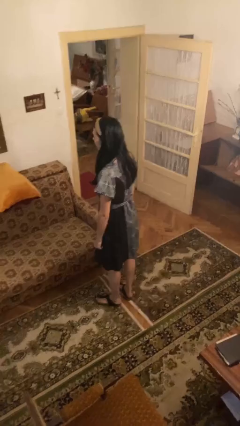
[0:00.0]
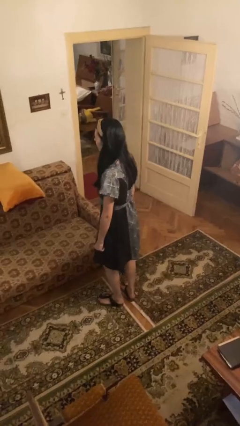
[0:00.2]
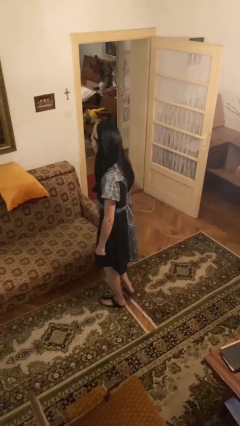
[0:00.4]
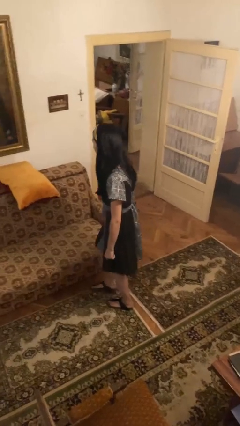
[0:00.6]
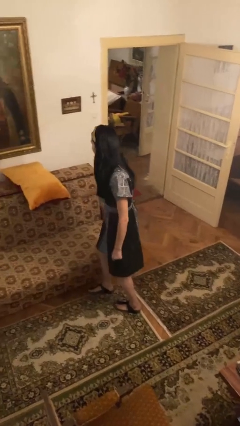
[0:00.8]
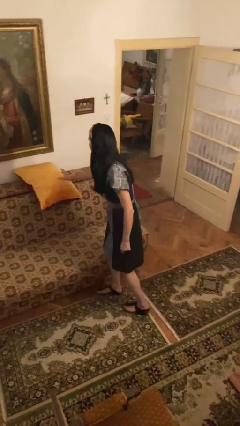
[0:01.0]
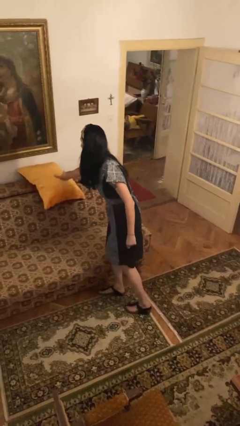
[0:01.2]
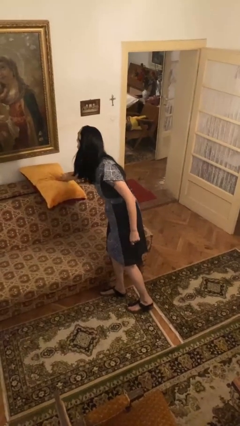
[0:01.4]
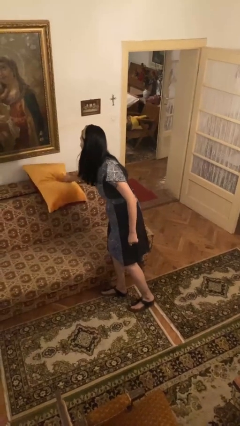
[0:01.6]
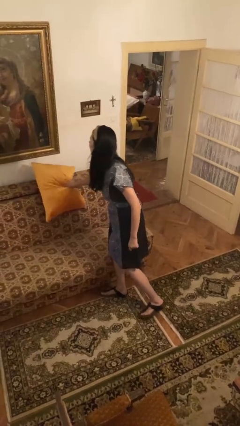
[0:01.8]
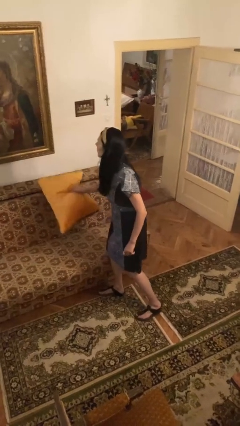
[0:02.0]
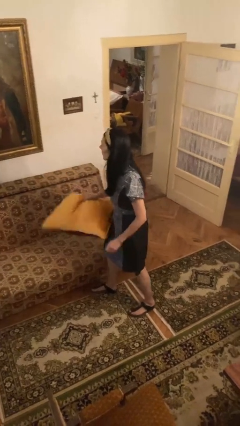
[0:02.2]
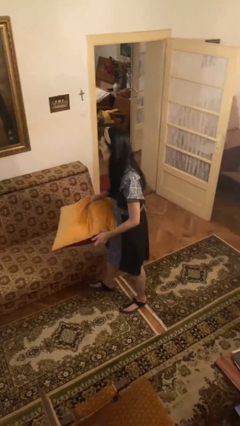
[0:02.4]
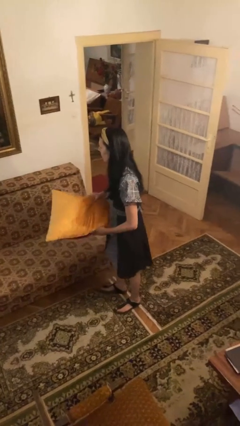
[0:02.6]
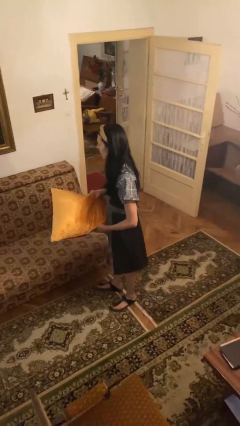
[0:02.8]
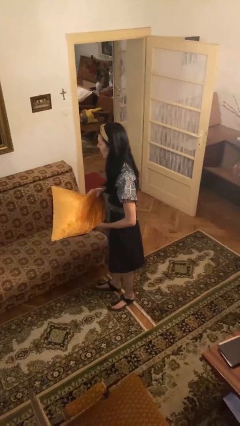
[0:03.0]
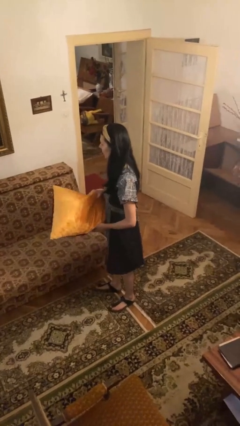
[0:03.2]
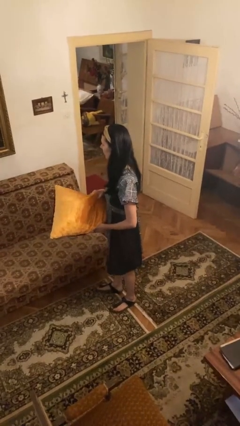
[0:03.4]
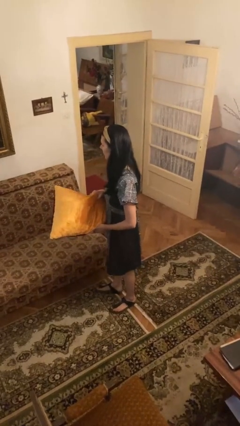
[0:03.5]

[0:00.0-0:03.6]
person picks up object from couch

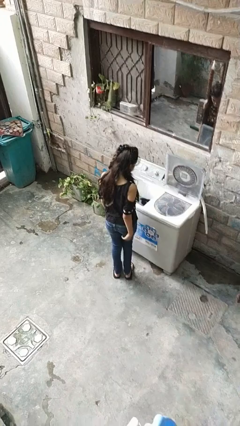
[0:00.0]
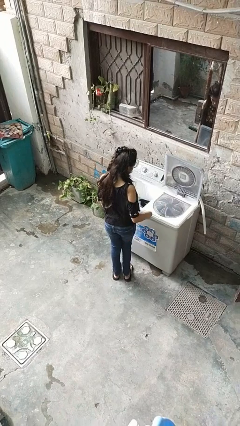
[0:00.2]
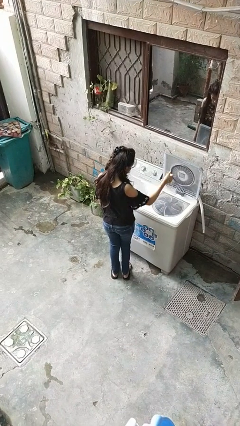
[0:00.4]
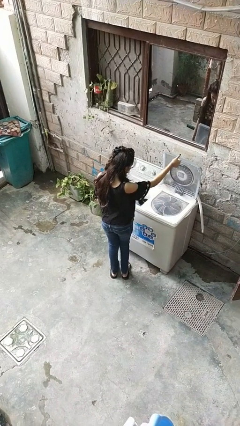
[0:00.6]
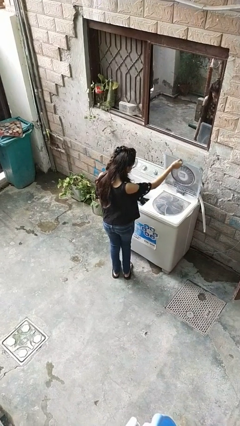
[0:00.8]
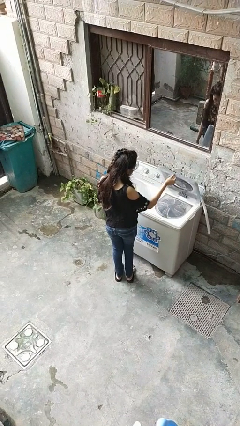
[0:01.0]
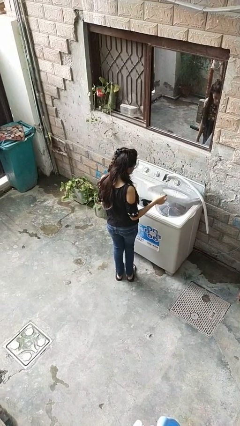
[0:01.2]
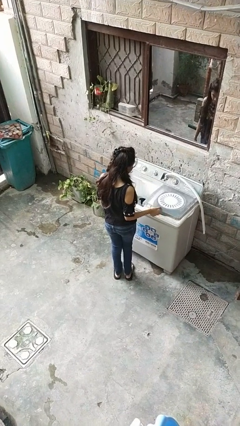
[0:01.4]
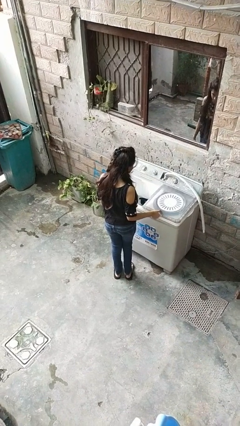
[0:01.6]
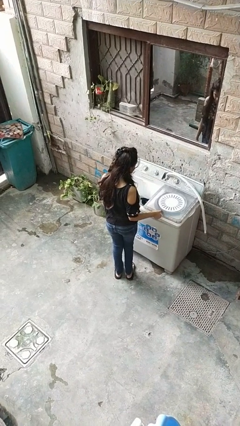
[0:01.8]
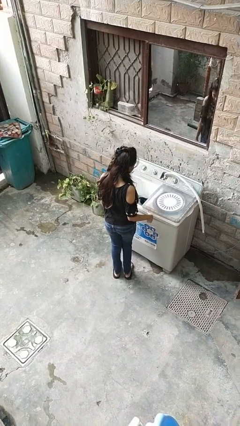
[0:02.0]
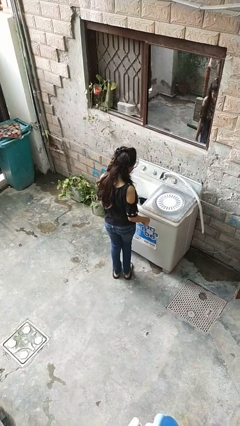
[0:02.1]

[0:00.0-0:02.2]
person closes clothes washer

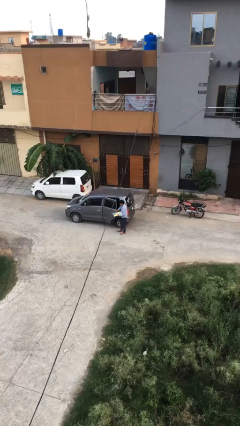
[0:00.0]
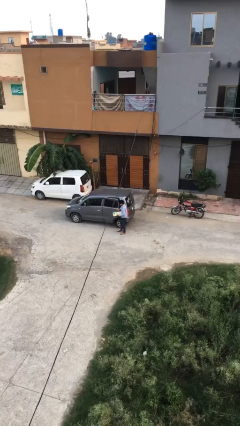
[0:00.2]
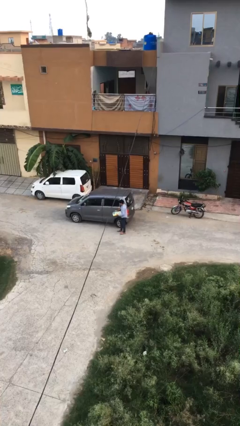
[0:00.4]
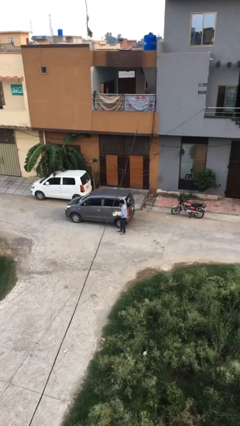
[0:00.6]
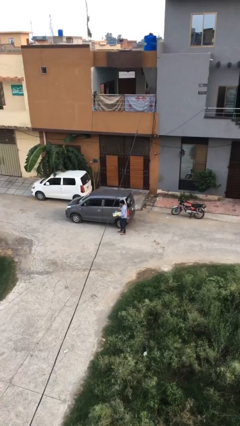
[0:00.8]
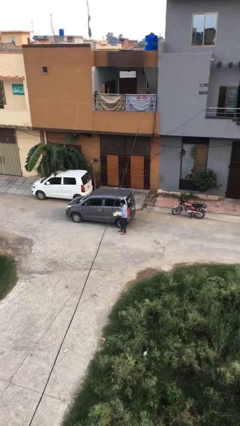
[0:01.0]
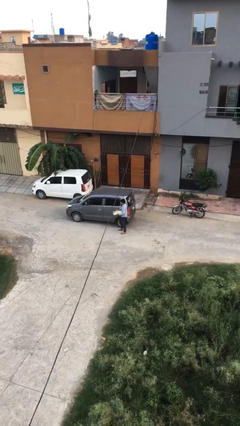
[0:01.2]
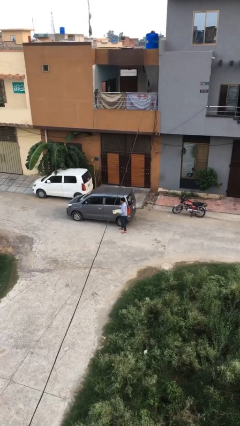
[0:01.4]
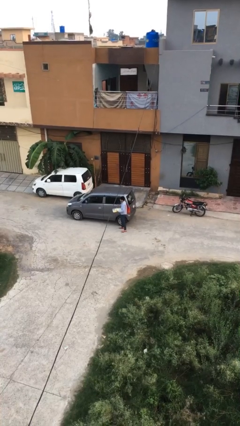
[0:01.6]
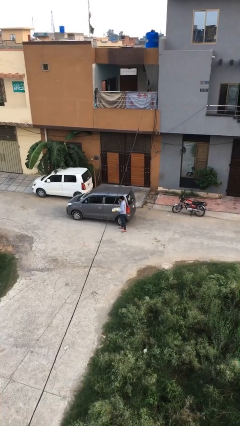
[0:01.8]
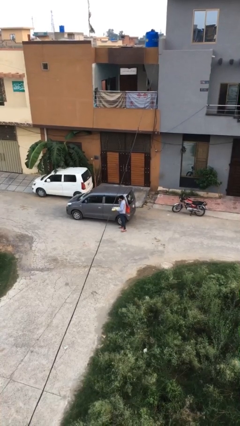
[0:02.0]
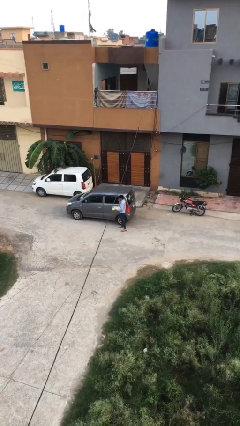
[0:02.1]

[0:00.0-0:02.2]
person closes car door

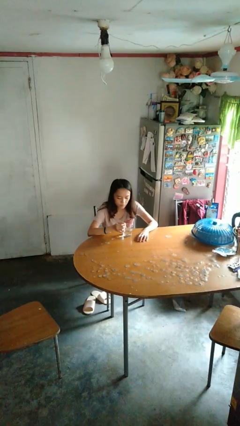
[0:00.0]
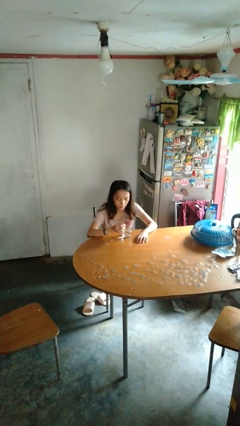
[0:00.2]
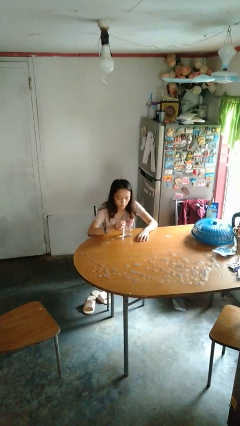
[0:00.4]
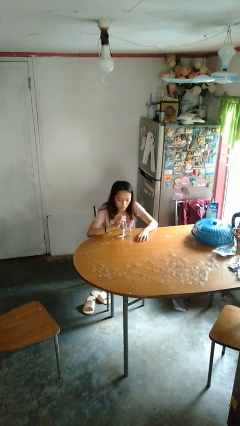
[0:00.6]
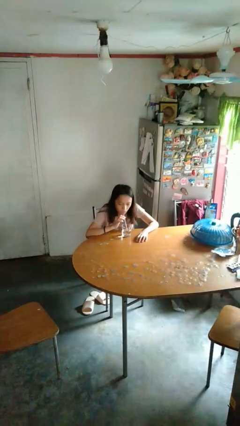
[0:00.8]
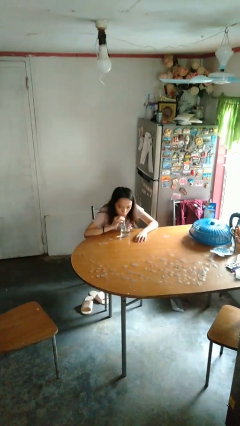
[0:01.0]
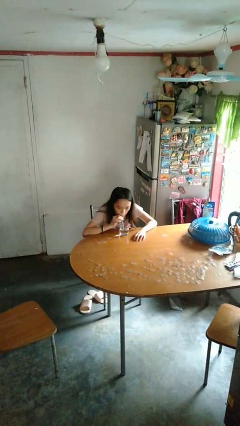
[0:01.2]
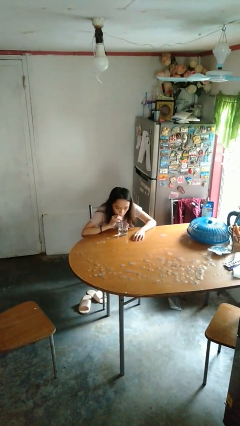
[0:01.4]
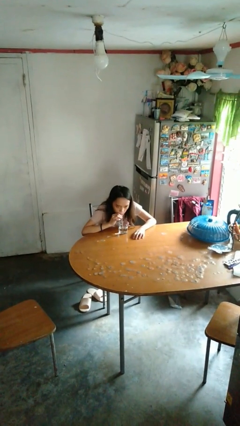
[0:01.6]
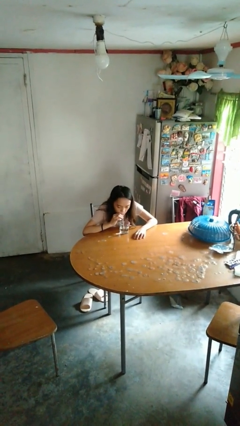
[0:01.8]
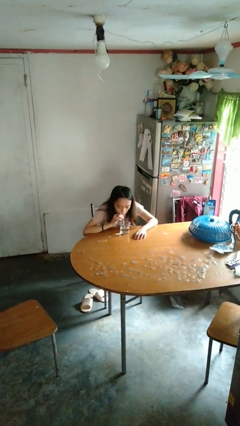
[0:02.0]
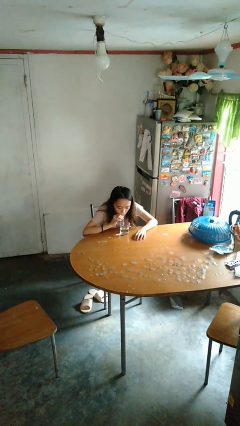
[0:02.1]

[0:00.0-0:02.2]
person drinks from straw

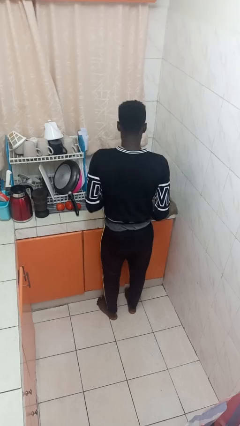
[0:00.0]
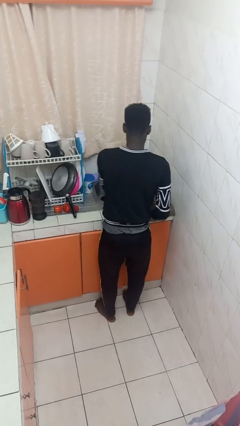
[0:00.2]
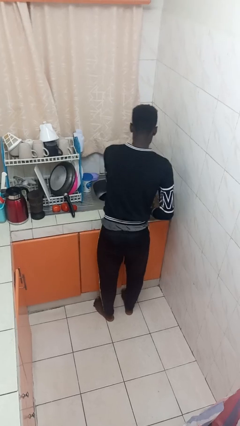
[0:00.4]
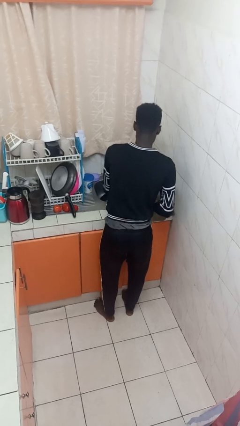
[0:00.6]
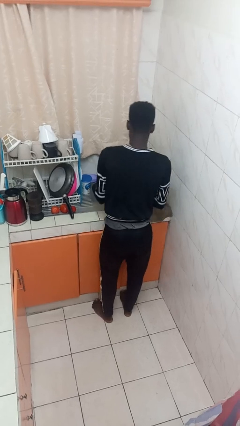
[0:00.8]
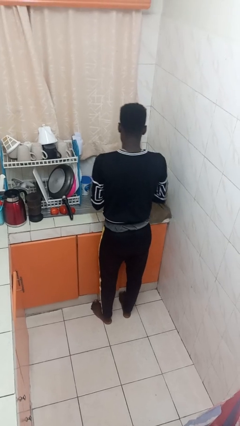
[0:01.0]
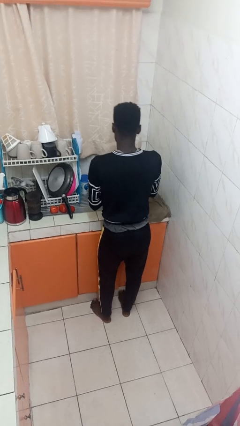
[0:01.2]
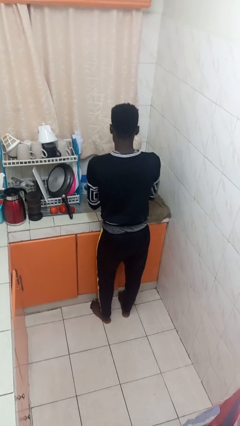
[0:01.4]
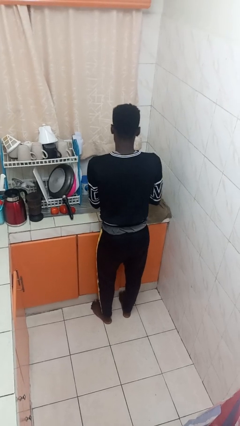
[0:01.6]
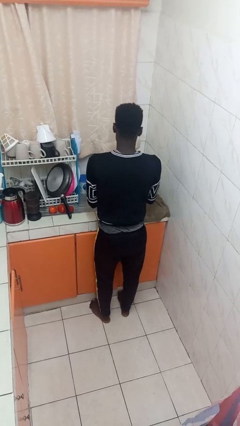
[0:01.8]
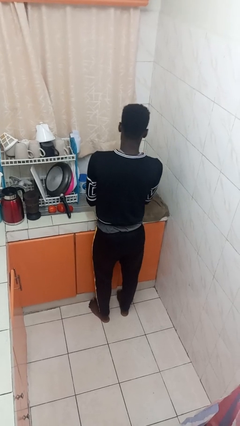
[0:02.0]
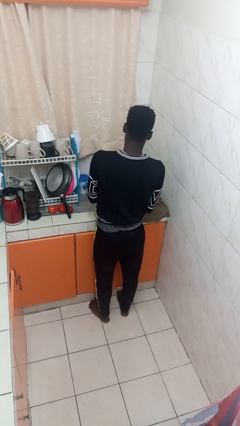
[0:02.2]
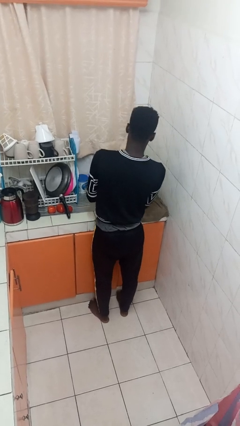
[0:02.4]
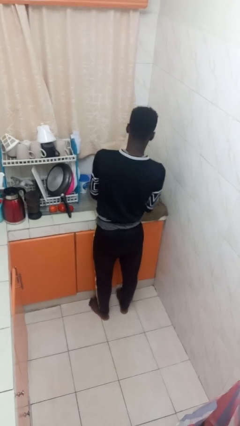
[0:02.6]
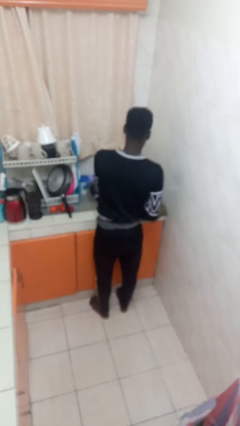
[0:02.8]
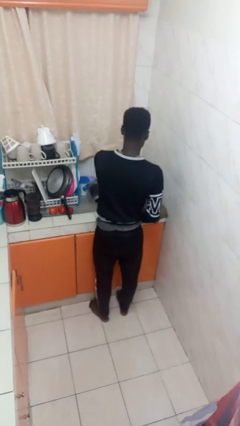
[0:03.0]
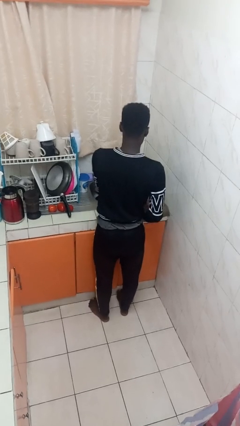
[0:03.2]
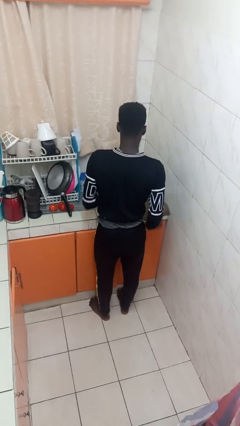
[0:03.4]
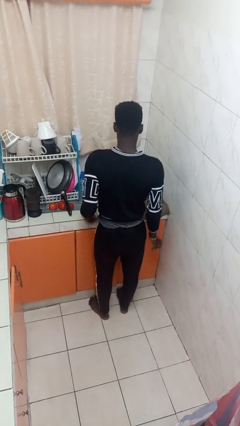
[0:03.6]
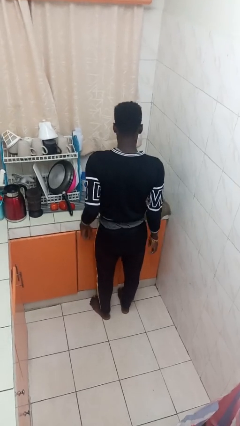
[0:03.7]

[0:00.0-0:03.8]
person washes dish

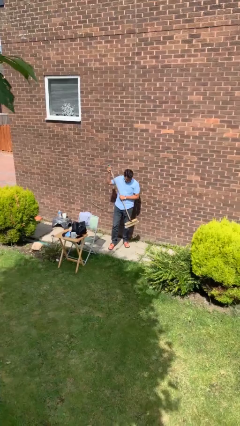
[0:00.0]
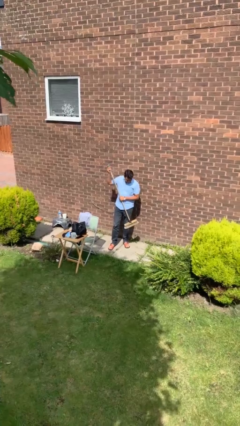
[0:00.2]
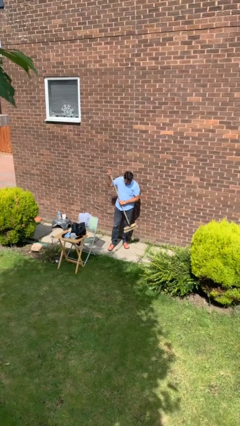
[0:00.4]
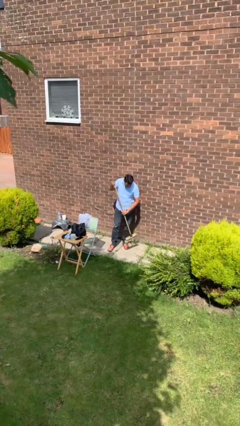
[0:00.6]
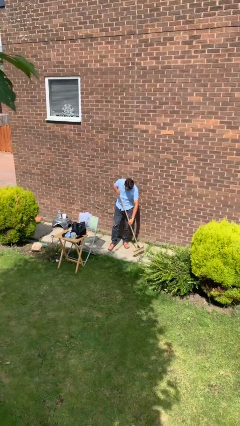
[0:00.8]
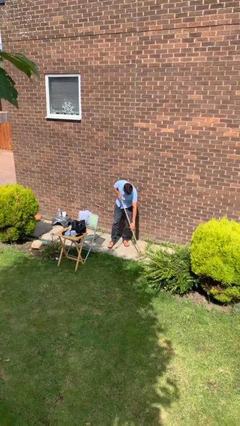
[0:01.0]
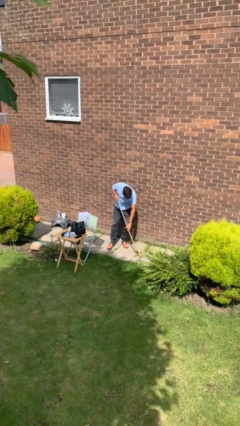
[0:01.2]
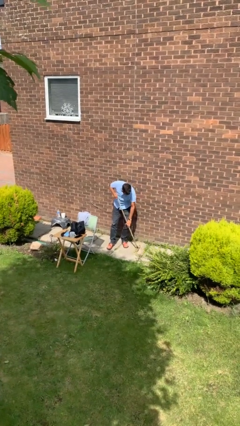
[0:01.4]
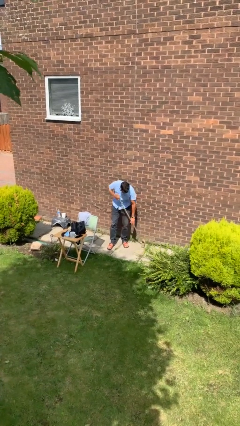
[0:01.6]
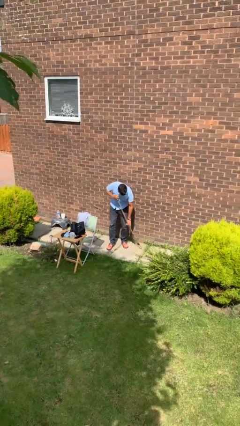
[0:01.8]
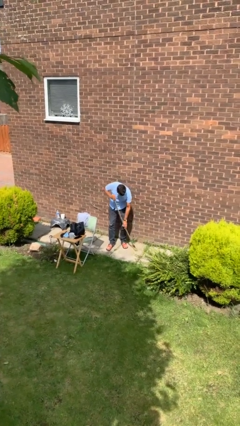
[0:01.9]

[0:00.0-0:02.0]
person sweeps floor

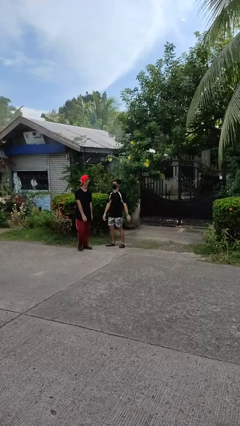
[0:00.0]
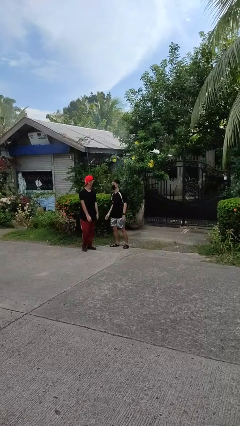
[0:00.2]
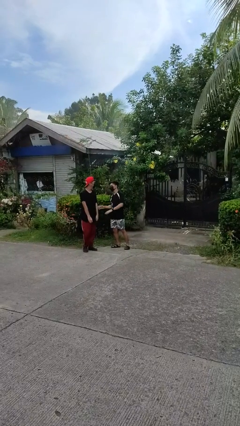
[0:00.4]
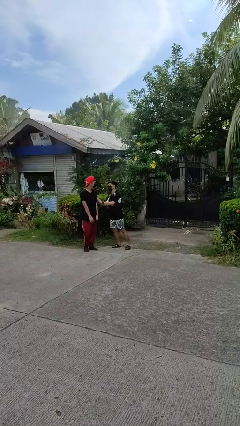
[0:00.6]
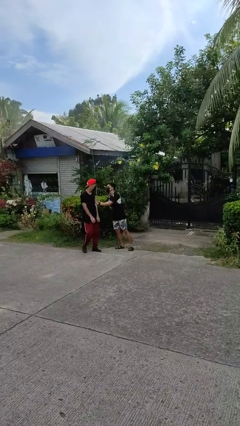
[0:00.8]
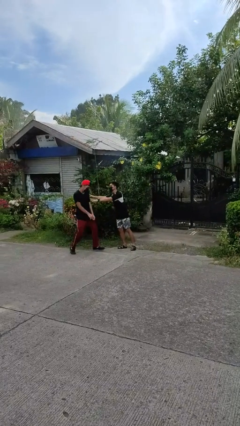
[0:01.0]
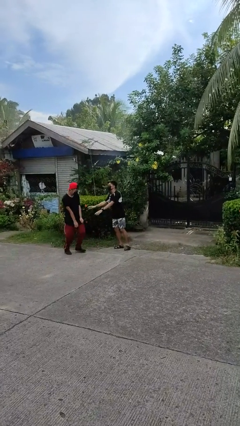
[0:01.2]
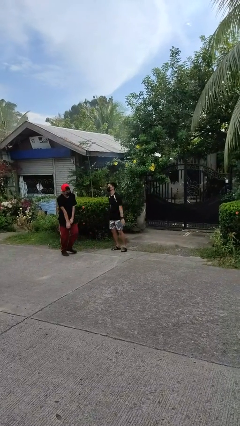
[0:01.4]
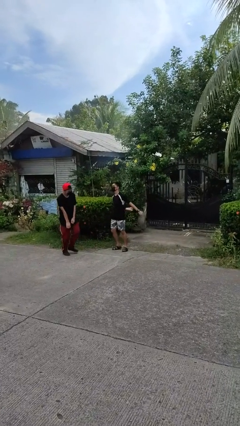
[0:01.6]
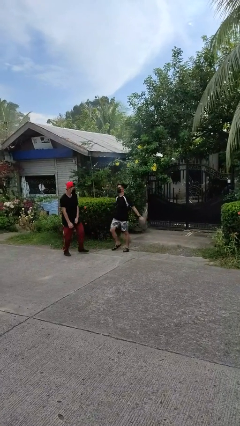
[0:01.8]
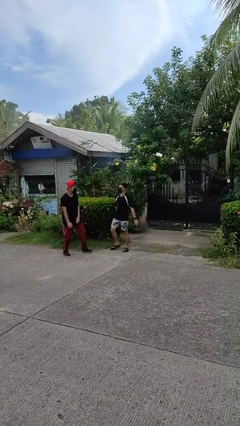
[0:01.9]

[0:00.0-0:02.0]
person shoves person
